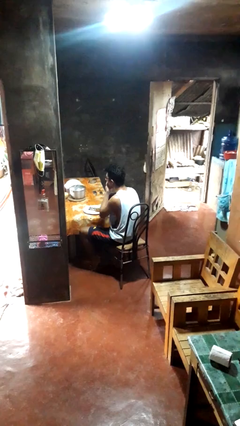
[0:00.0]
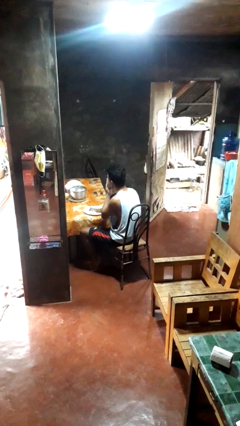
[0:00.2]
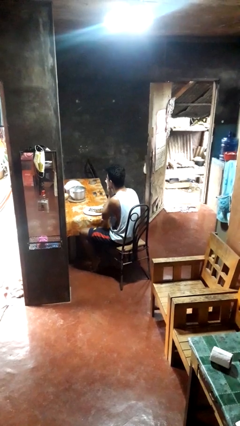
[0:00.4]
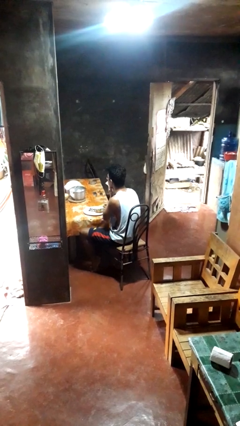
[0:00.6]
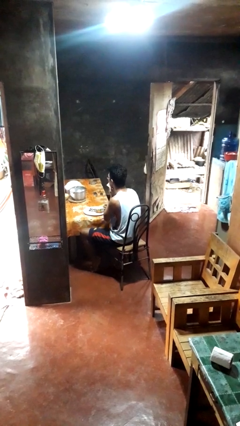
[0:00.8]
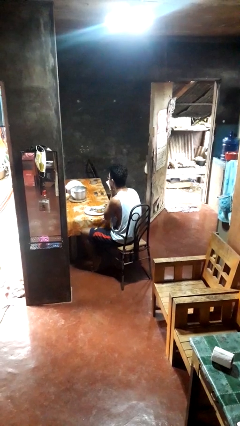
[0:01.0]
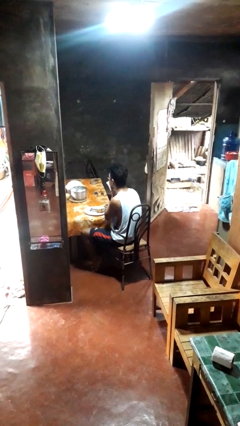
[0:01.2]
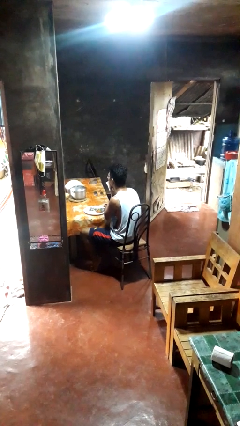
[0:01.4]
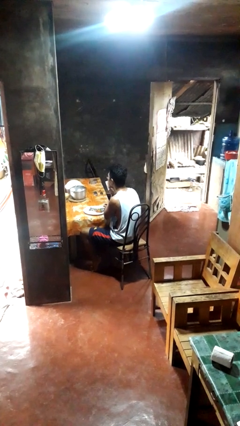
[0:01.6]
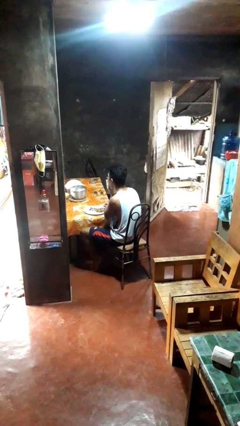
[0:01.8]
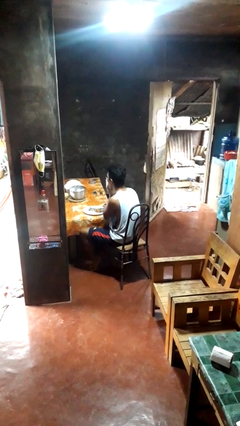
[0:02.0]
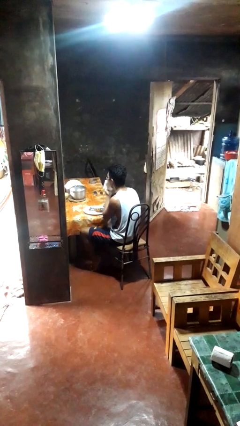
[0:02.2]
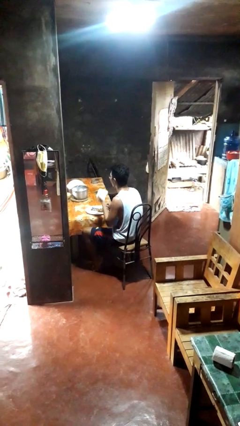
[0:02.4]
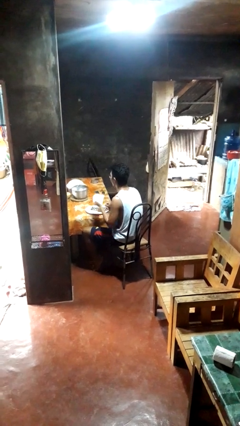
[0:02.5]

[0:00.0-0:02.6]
person wipes mouth with napkin

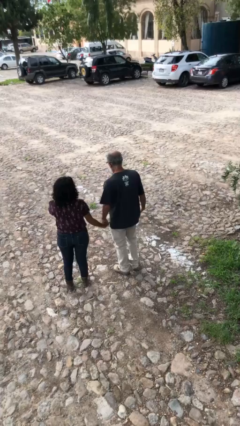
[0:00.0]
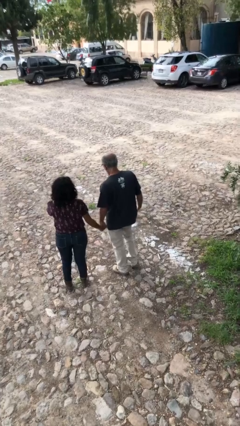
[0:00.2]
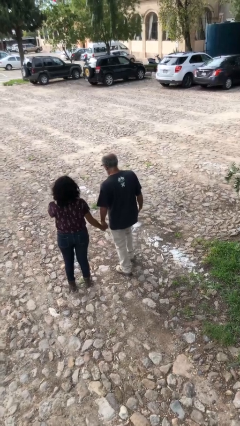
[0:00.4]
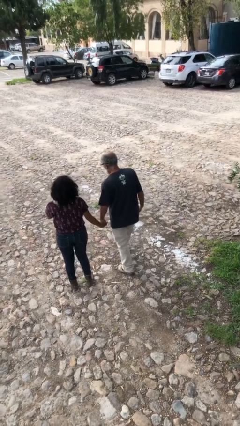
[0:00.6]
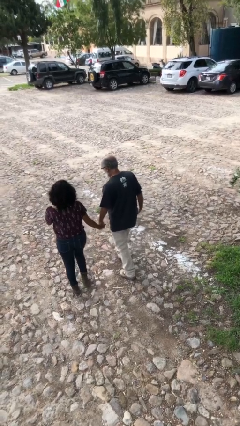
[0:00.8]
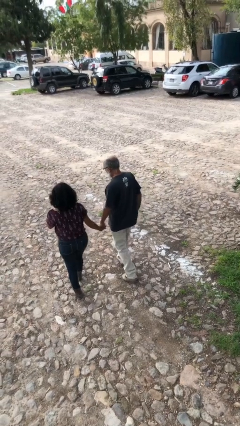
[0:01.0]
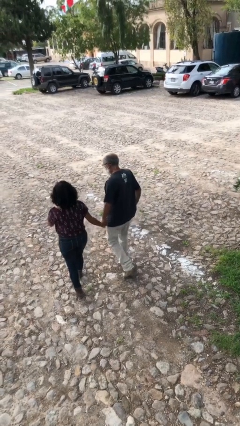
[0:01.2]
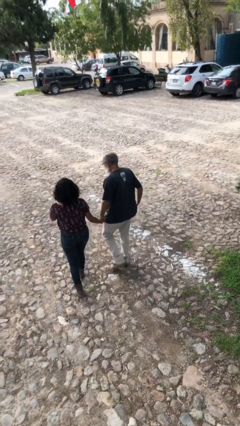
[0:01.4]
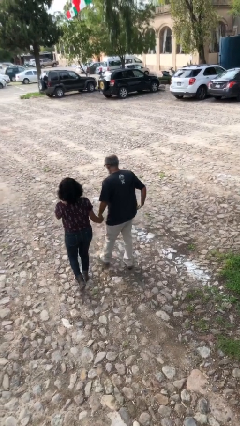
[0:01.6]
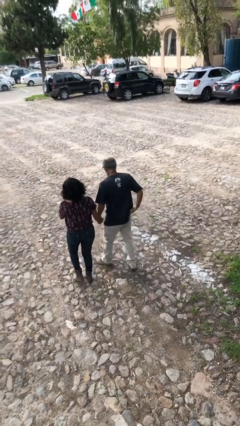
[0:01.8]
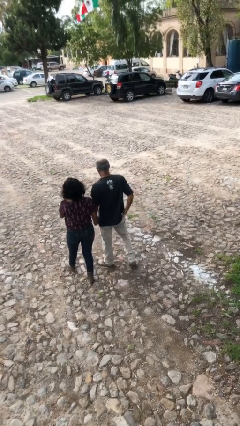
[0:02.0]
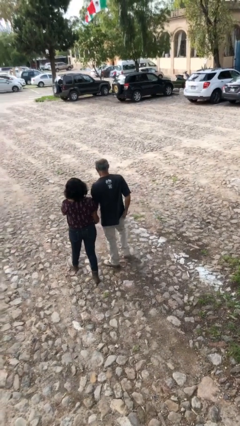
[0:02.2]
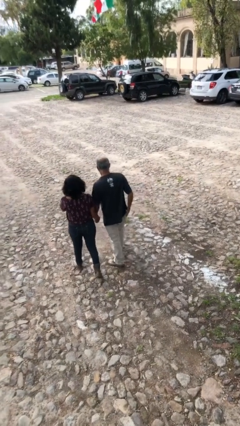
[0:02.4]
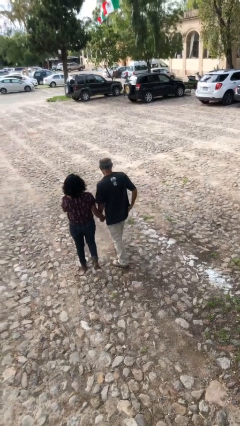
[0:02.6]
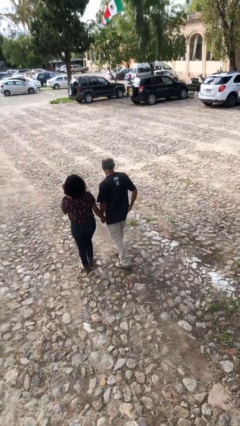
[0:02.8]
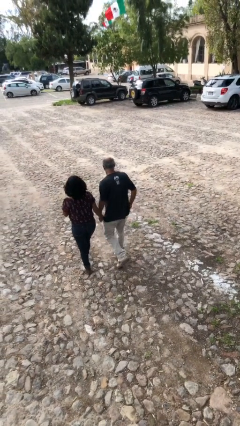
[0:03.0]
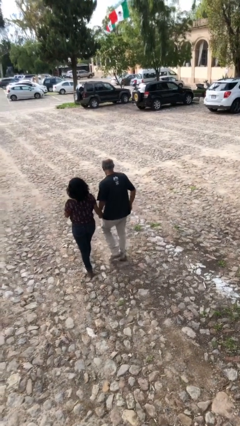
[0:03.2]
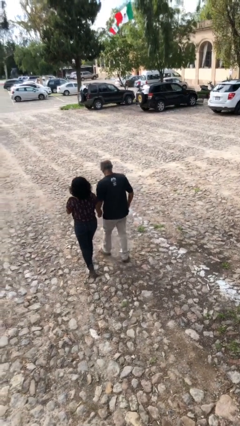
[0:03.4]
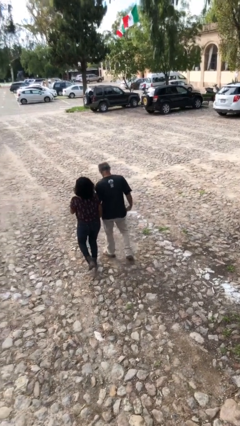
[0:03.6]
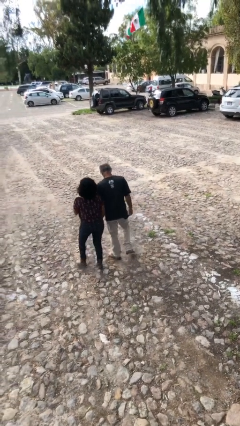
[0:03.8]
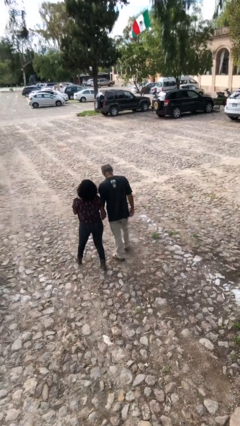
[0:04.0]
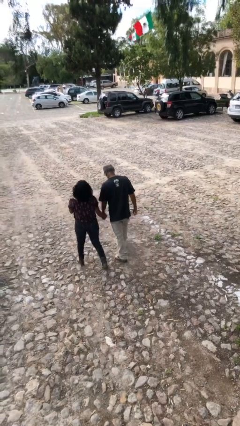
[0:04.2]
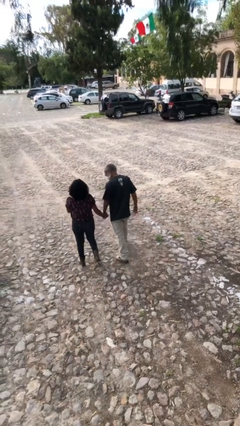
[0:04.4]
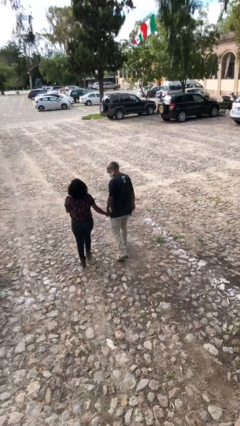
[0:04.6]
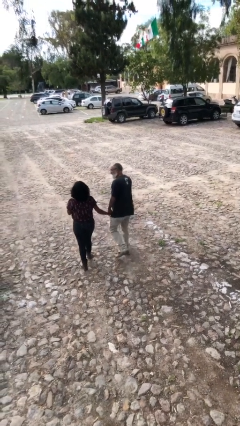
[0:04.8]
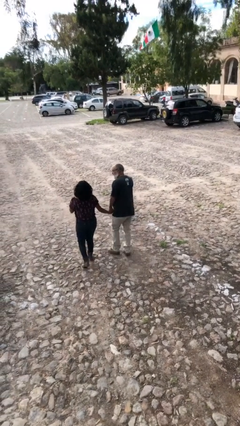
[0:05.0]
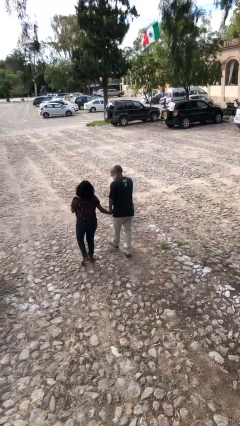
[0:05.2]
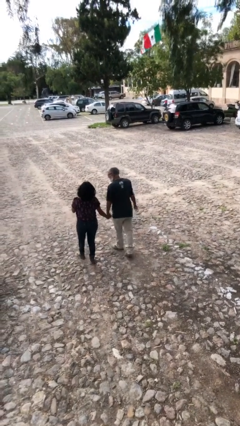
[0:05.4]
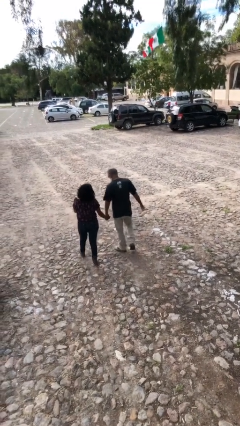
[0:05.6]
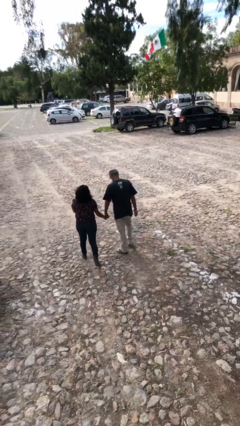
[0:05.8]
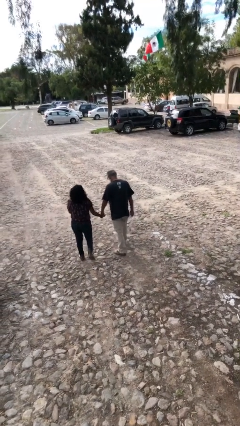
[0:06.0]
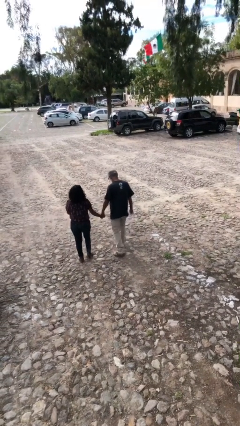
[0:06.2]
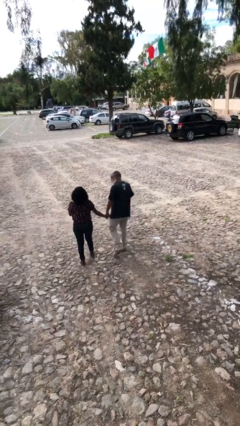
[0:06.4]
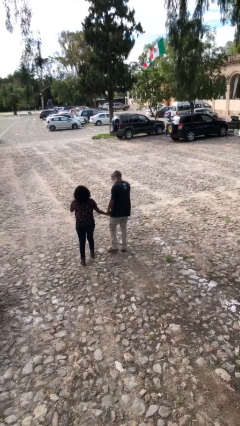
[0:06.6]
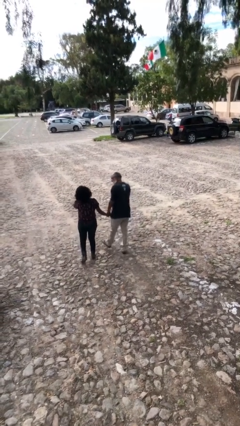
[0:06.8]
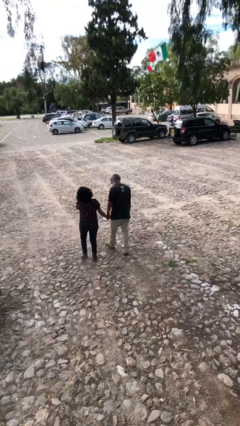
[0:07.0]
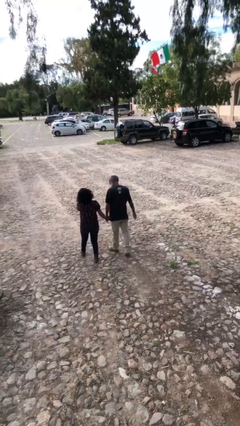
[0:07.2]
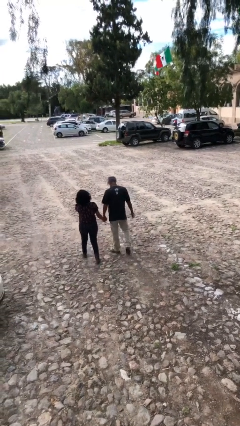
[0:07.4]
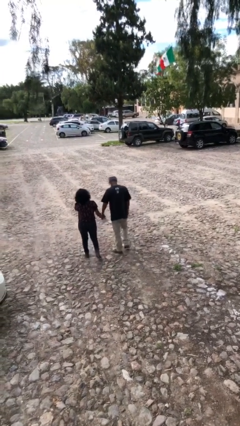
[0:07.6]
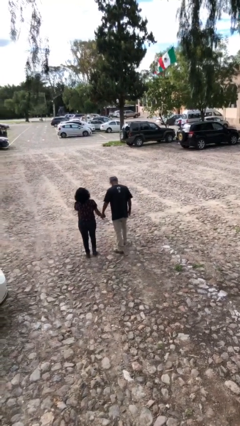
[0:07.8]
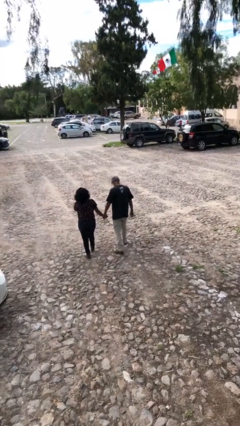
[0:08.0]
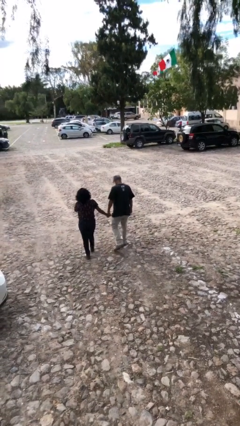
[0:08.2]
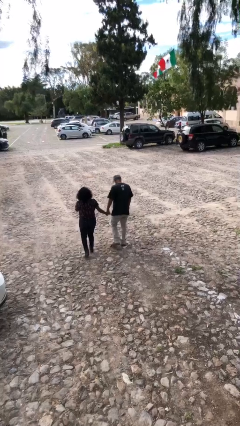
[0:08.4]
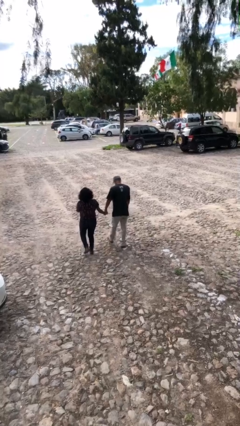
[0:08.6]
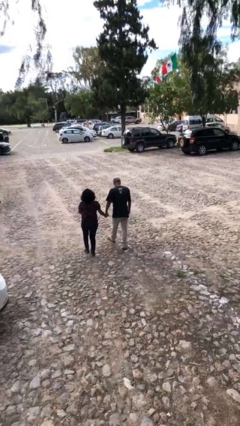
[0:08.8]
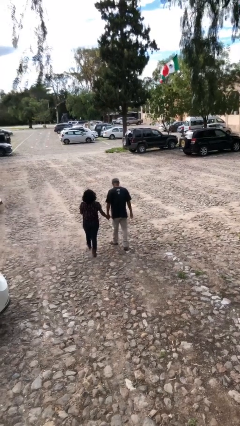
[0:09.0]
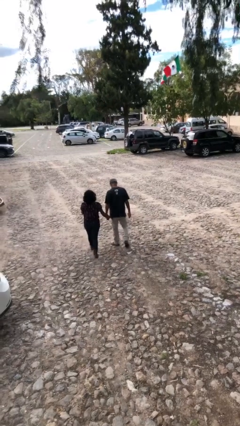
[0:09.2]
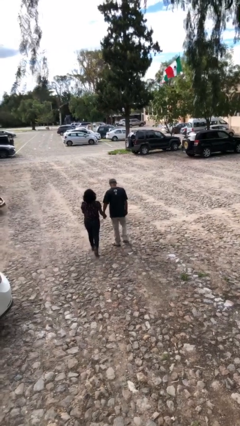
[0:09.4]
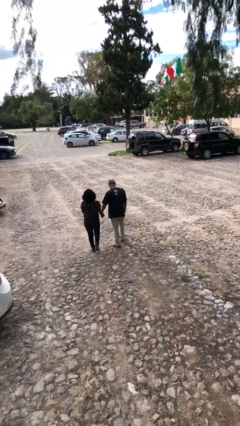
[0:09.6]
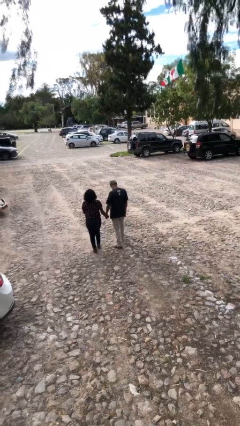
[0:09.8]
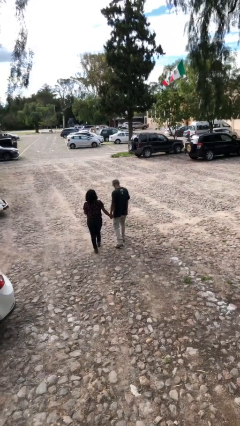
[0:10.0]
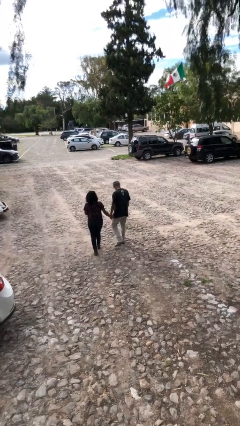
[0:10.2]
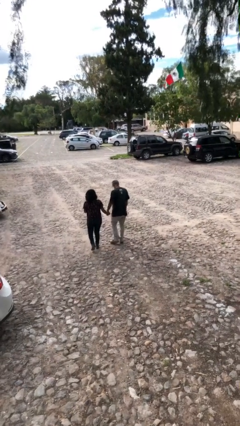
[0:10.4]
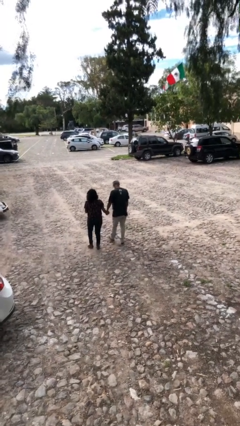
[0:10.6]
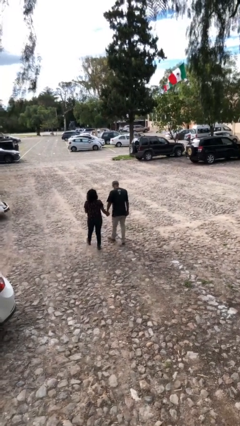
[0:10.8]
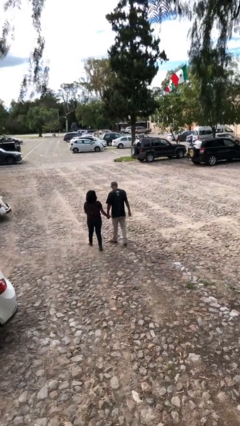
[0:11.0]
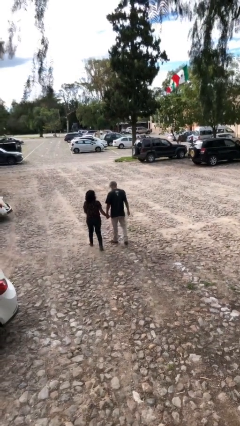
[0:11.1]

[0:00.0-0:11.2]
person holds hand

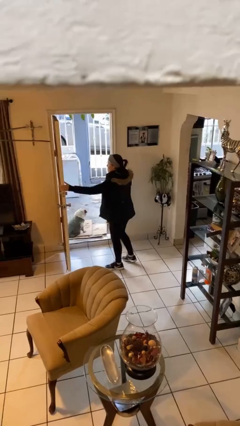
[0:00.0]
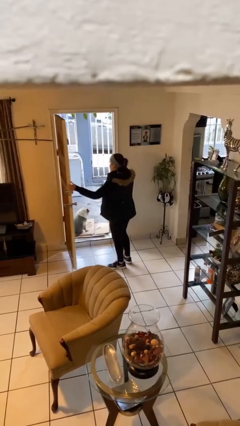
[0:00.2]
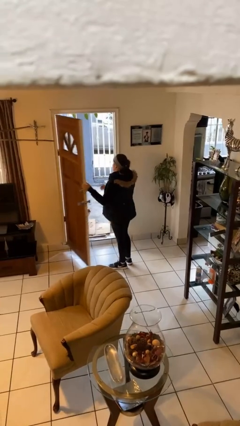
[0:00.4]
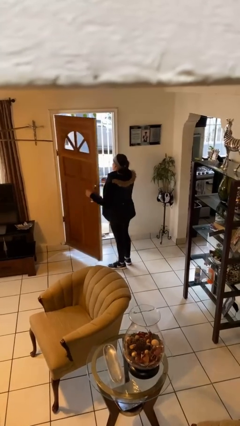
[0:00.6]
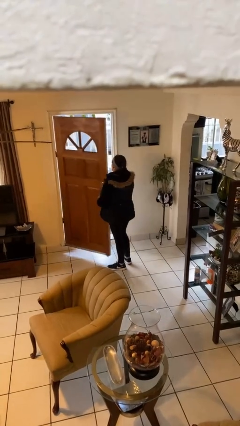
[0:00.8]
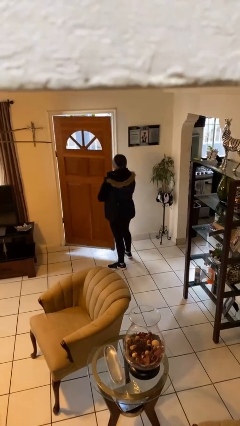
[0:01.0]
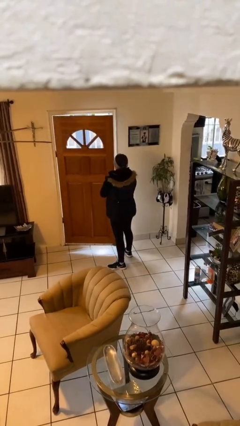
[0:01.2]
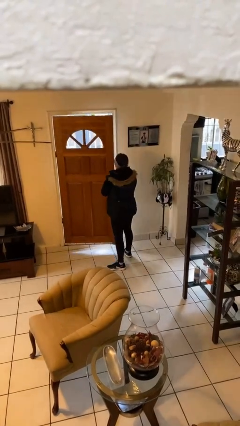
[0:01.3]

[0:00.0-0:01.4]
person closes facility door

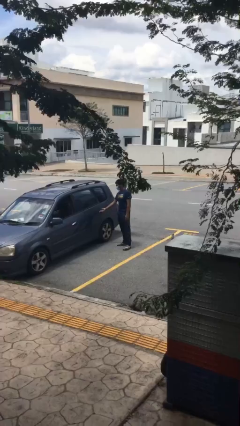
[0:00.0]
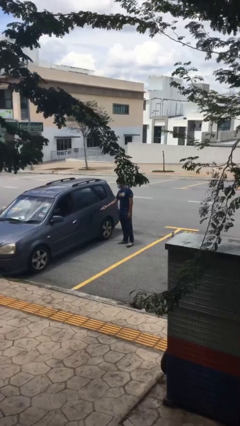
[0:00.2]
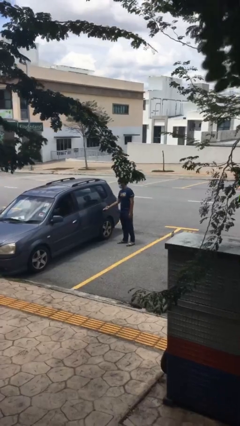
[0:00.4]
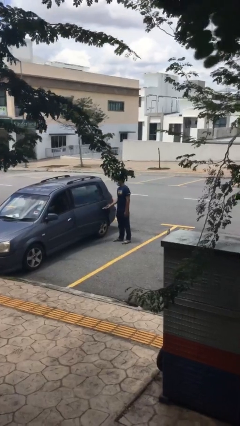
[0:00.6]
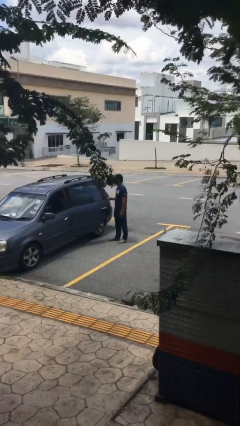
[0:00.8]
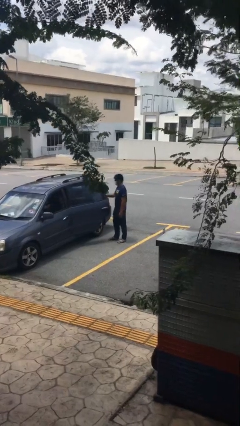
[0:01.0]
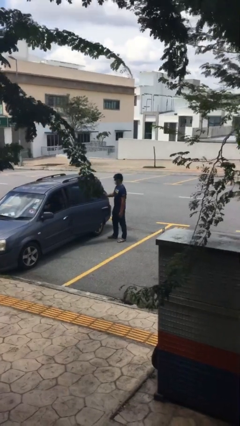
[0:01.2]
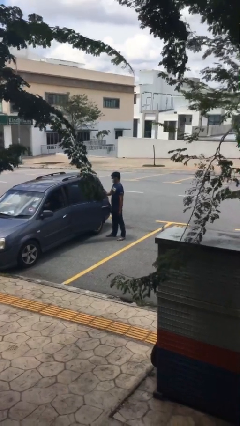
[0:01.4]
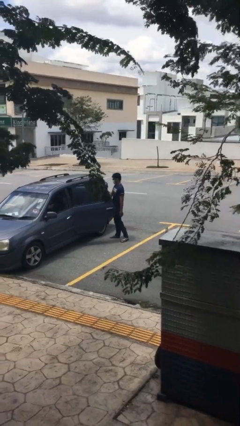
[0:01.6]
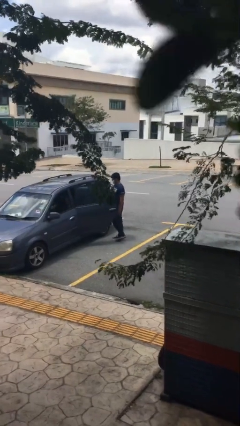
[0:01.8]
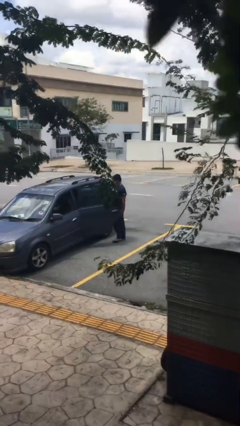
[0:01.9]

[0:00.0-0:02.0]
person opens car door

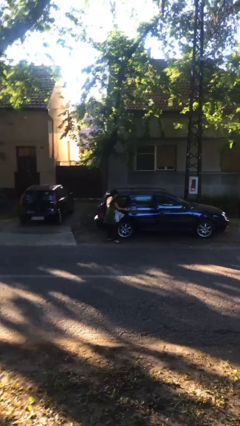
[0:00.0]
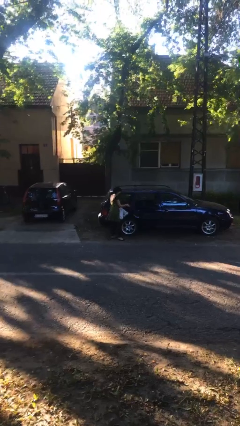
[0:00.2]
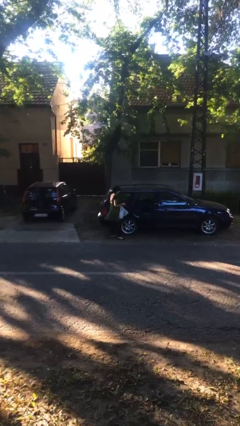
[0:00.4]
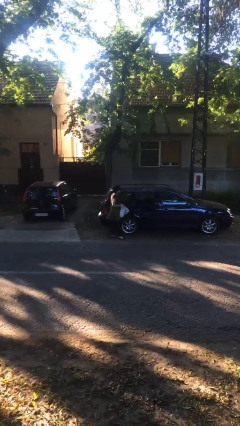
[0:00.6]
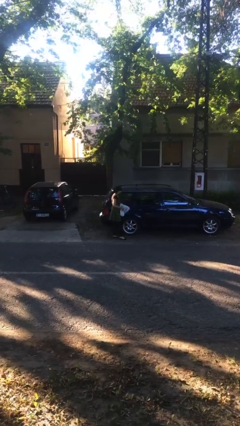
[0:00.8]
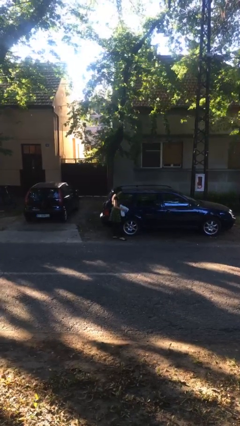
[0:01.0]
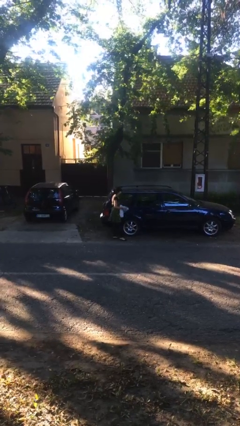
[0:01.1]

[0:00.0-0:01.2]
person closes car door
